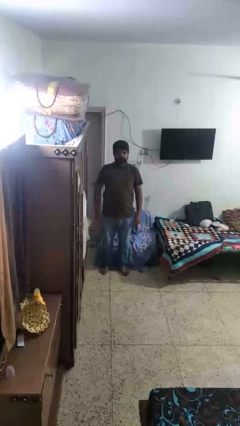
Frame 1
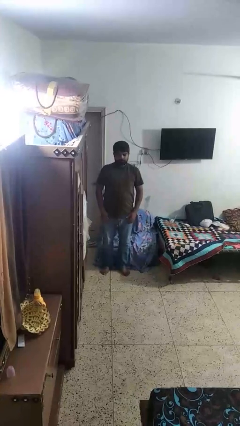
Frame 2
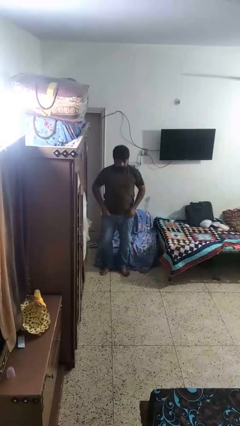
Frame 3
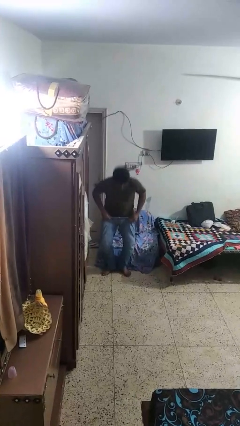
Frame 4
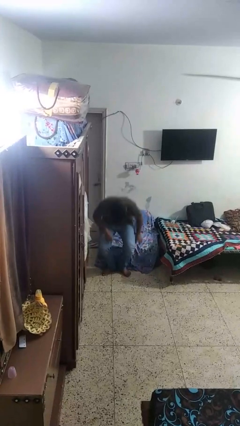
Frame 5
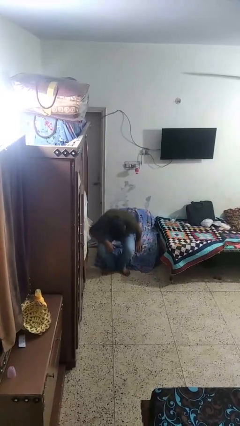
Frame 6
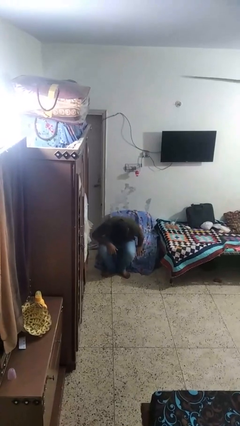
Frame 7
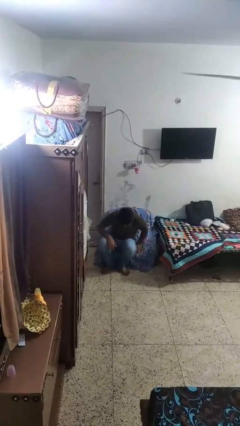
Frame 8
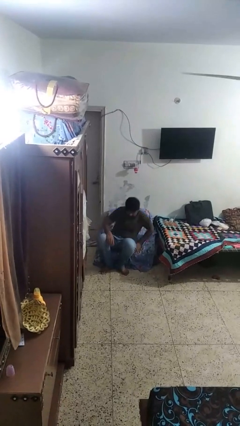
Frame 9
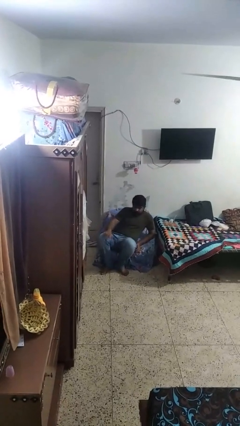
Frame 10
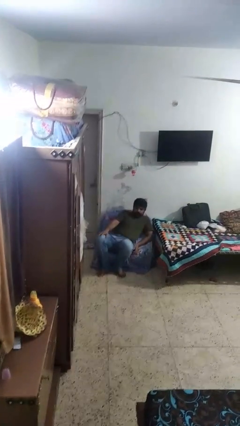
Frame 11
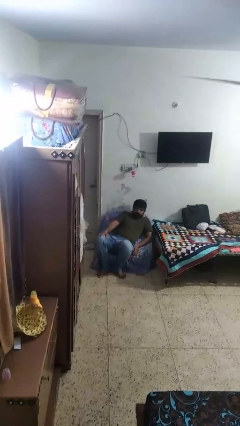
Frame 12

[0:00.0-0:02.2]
person lies down on couch

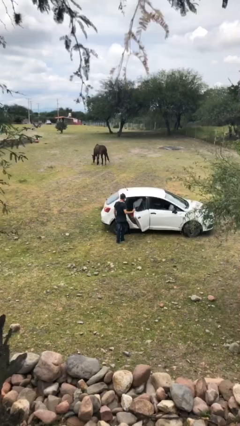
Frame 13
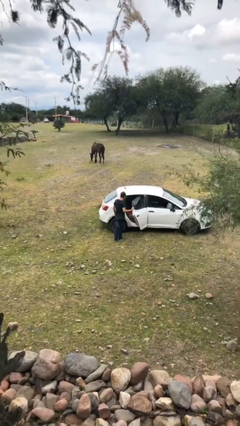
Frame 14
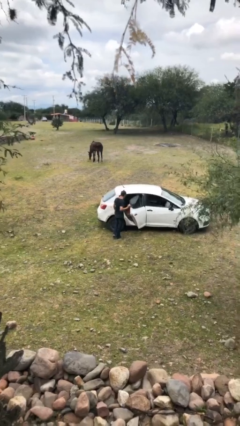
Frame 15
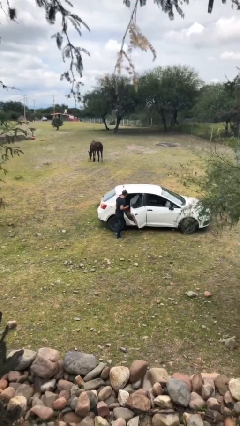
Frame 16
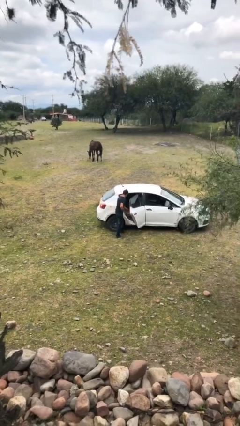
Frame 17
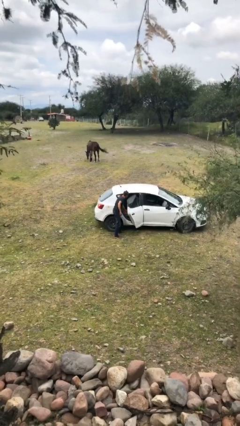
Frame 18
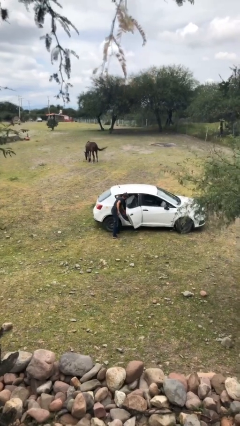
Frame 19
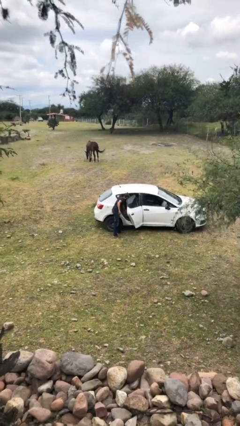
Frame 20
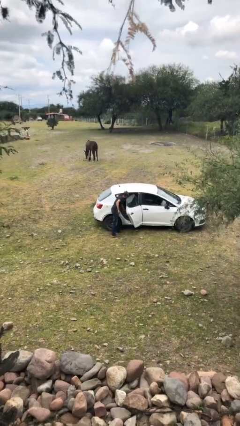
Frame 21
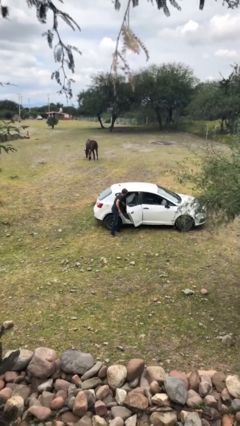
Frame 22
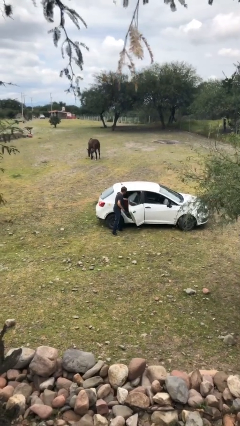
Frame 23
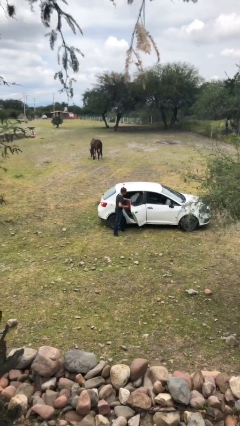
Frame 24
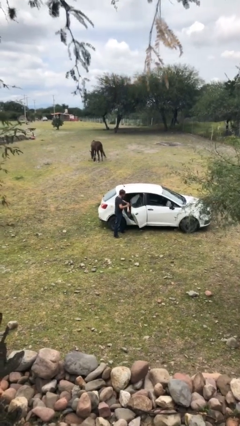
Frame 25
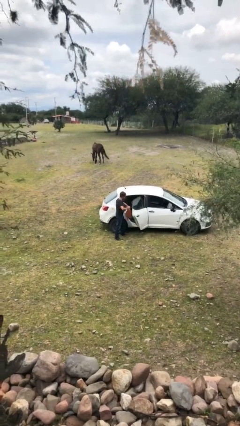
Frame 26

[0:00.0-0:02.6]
person unloads car

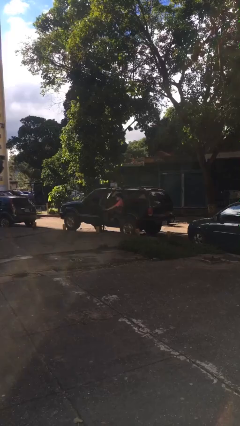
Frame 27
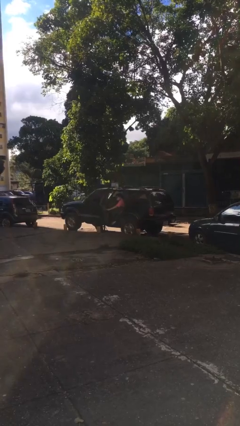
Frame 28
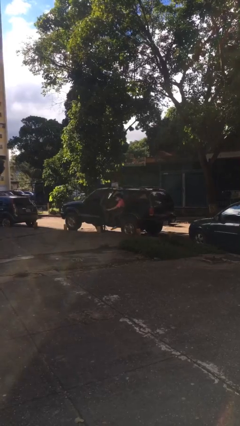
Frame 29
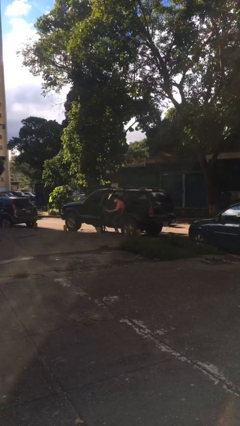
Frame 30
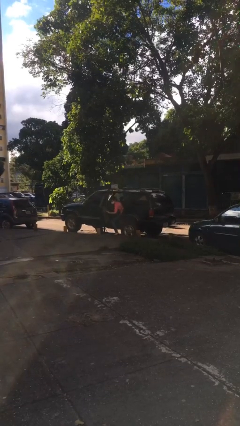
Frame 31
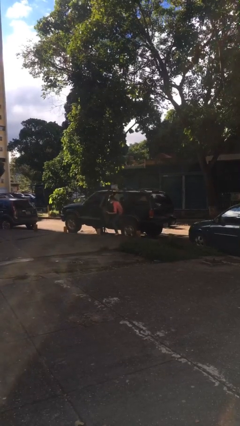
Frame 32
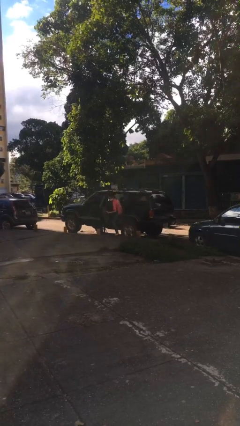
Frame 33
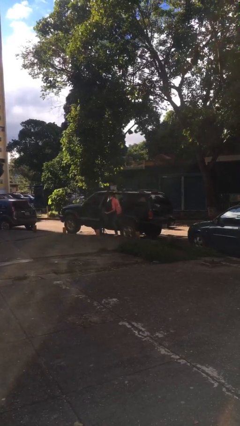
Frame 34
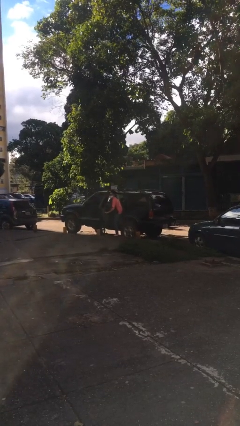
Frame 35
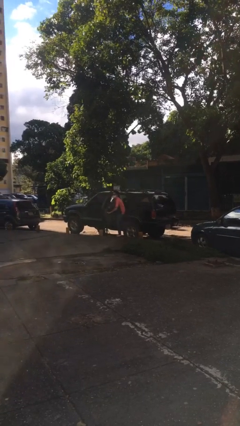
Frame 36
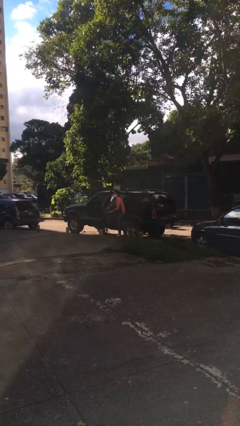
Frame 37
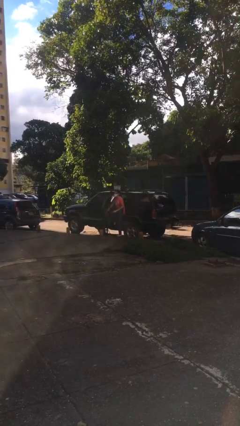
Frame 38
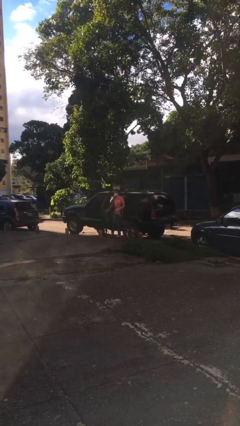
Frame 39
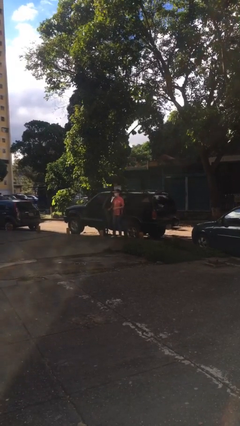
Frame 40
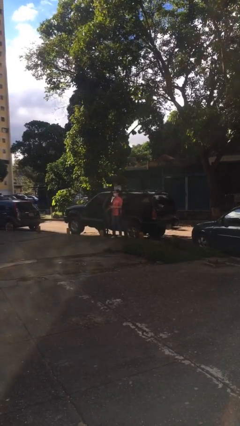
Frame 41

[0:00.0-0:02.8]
person exits car

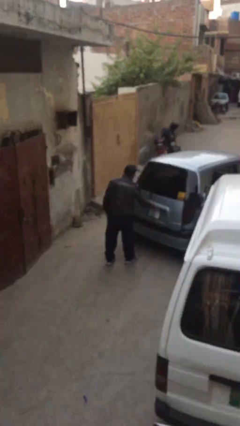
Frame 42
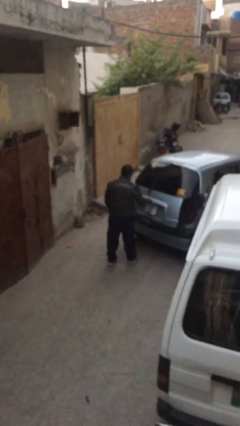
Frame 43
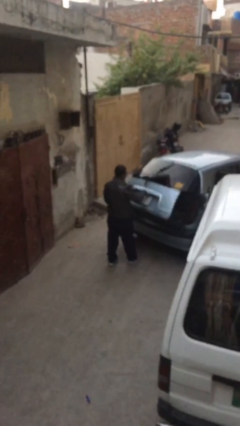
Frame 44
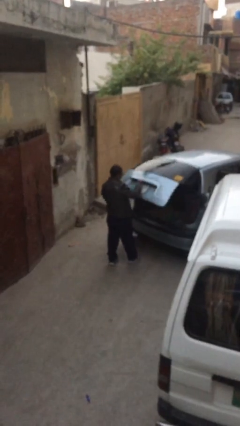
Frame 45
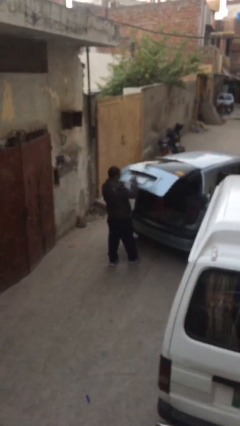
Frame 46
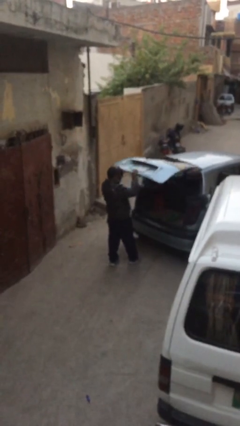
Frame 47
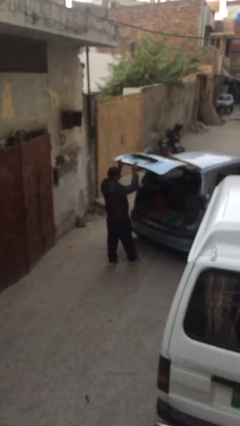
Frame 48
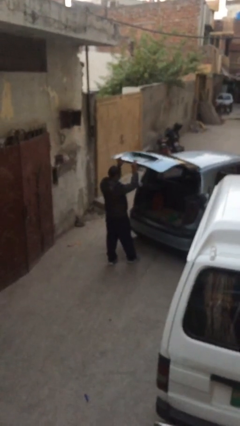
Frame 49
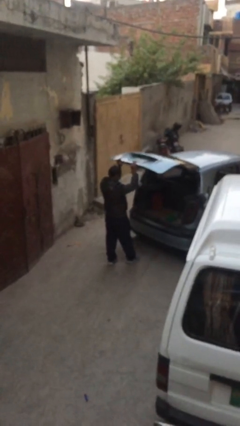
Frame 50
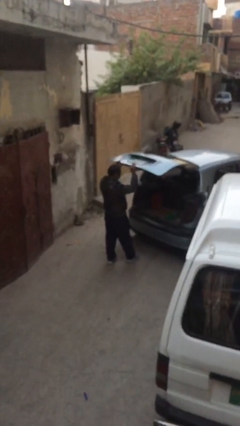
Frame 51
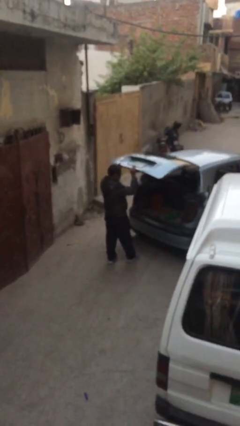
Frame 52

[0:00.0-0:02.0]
person opens car trunk

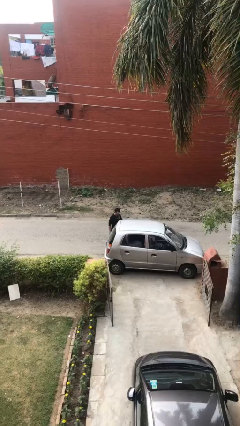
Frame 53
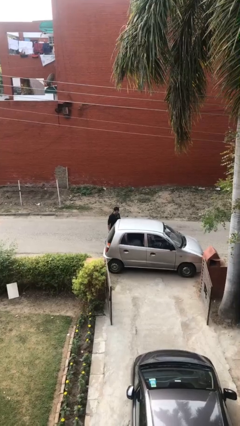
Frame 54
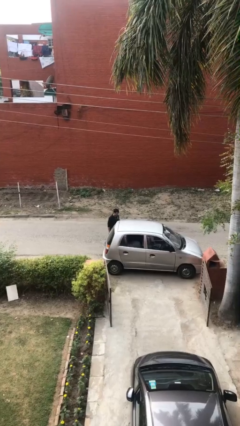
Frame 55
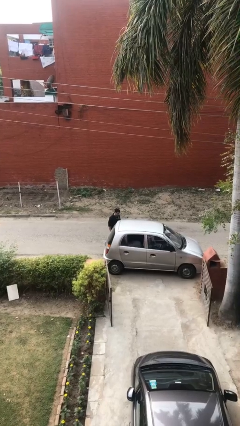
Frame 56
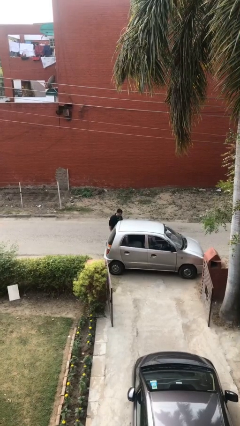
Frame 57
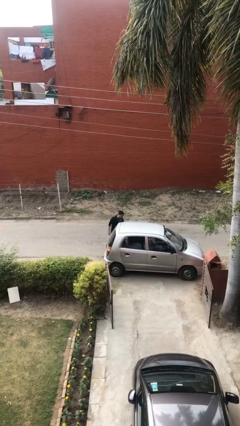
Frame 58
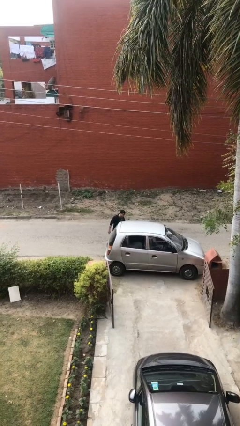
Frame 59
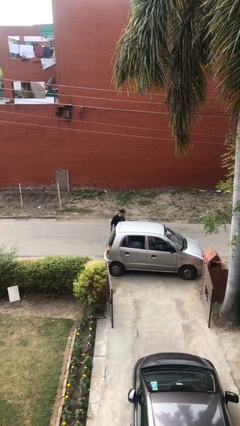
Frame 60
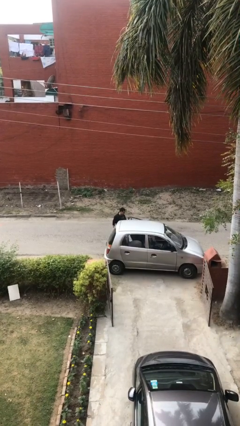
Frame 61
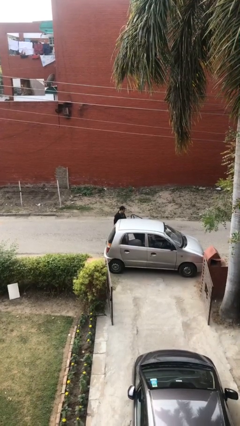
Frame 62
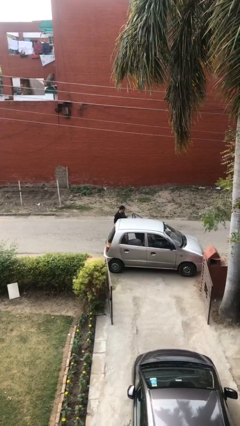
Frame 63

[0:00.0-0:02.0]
person opens car door

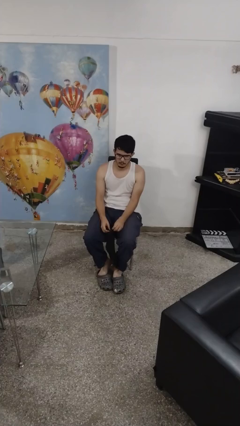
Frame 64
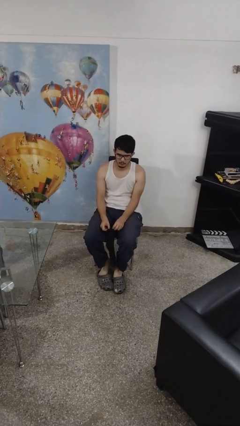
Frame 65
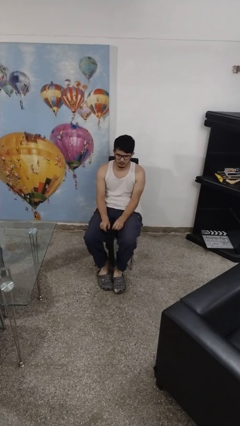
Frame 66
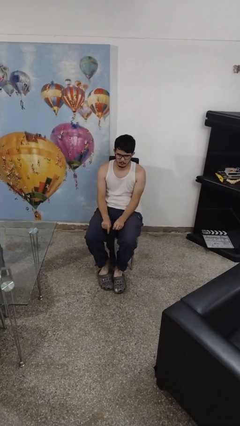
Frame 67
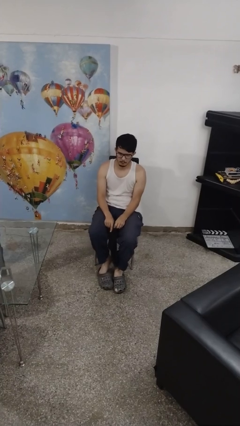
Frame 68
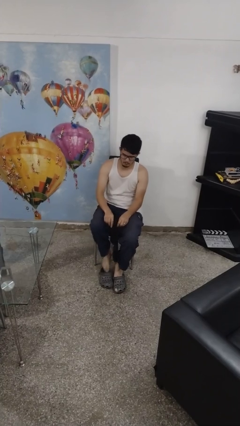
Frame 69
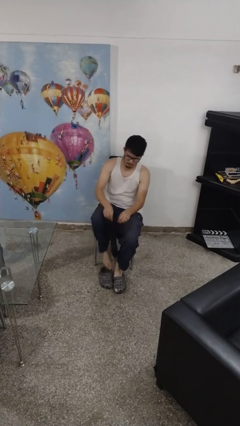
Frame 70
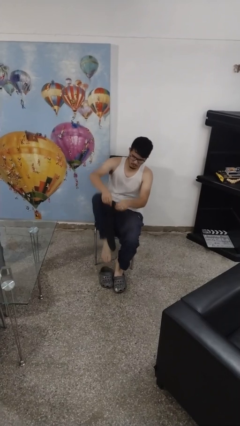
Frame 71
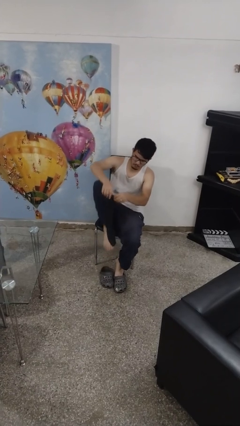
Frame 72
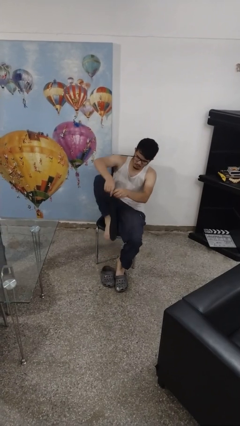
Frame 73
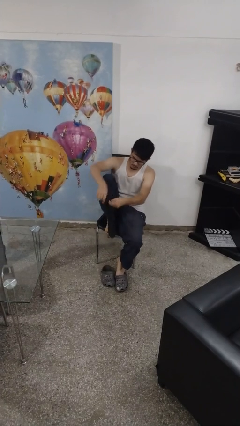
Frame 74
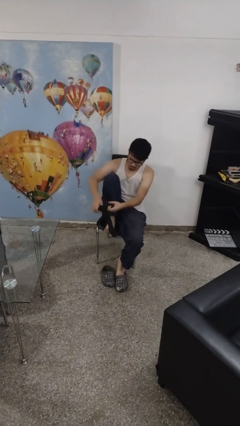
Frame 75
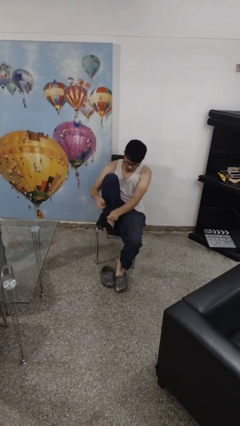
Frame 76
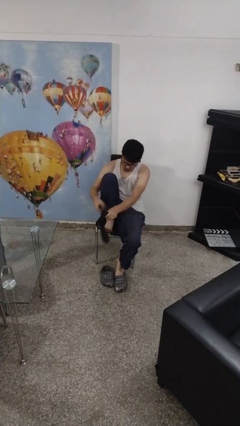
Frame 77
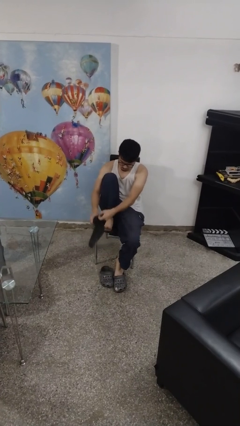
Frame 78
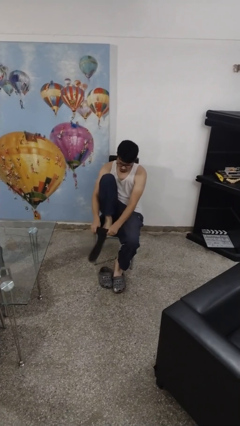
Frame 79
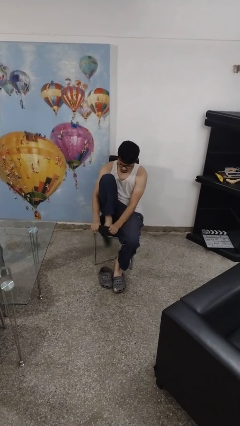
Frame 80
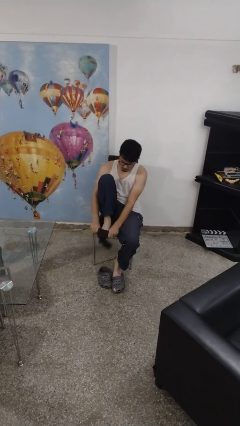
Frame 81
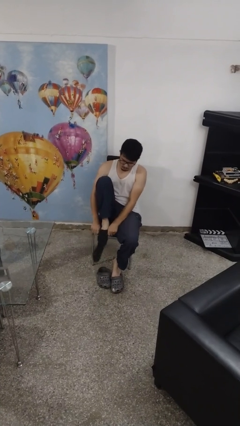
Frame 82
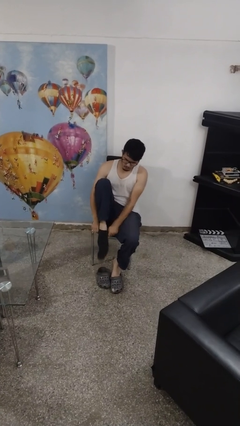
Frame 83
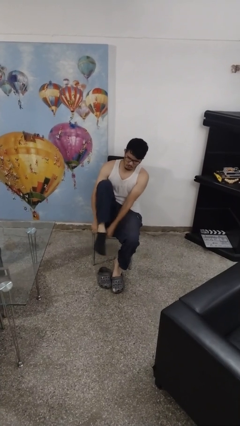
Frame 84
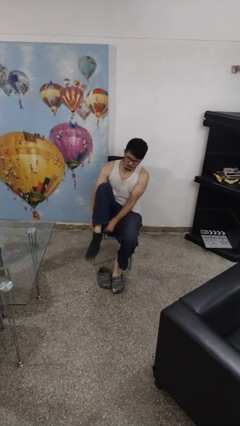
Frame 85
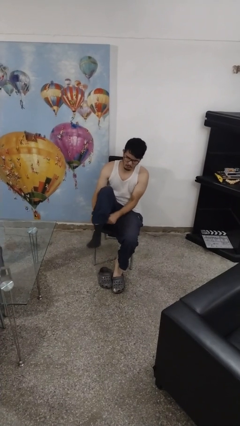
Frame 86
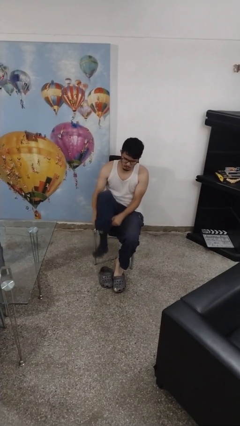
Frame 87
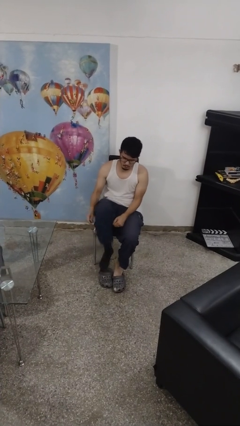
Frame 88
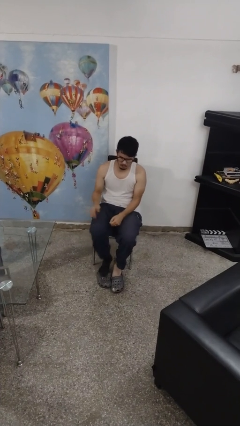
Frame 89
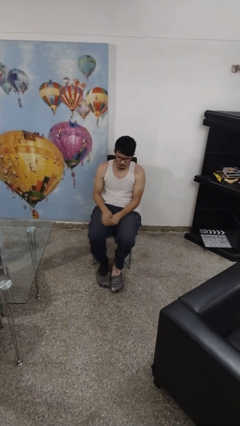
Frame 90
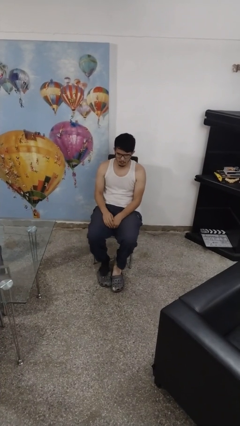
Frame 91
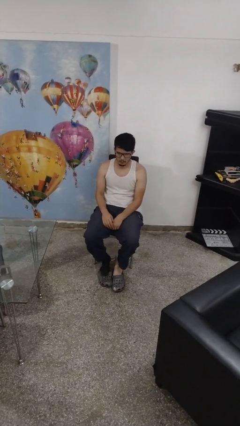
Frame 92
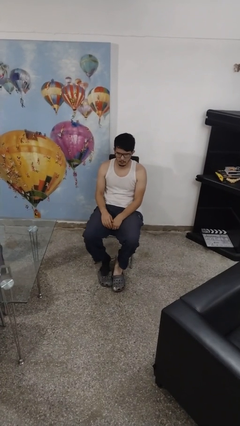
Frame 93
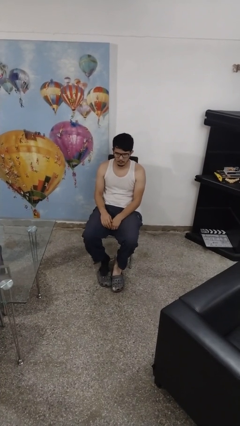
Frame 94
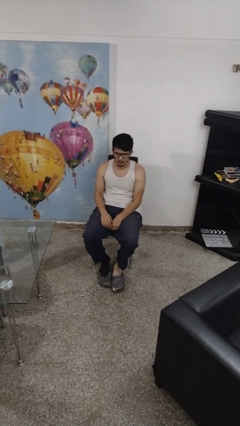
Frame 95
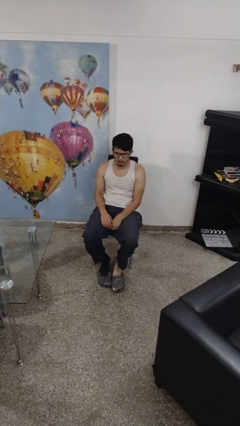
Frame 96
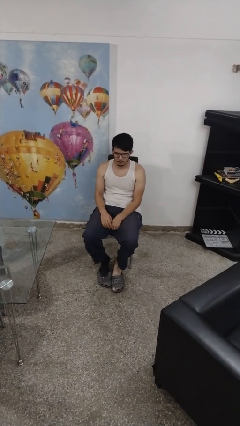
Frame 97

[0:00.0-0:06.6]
person puts on socks
